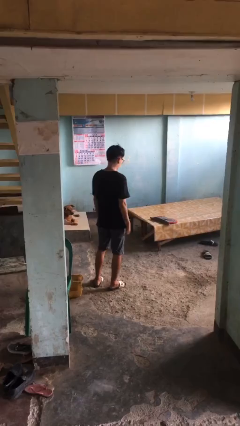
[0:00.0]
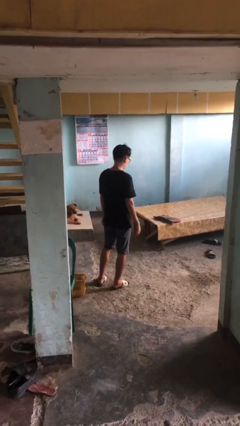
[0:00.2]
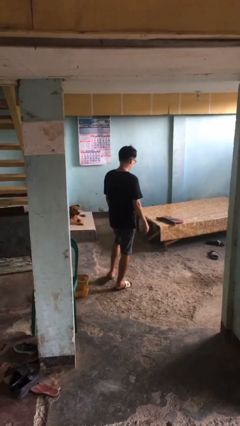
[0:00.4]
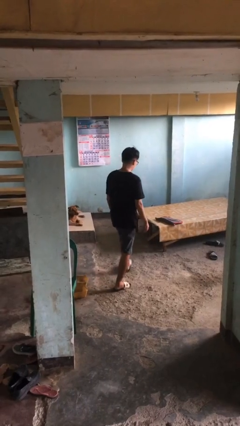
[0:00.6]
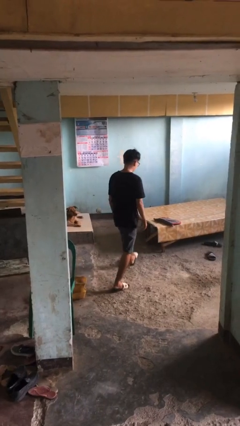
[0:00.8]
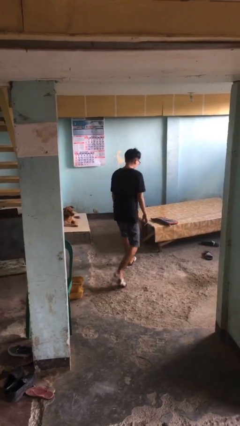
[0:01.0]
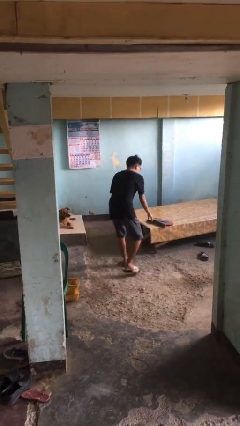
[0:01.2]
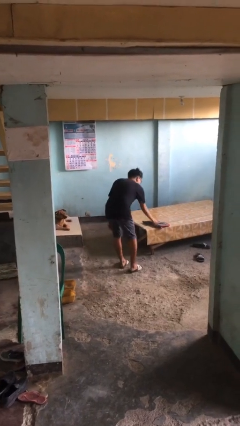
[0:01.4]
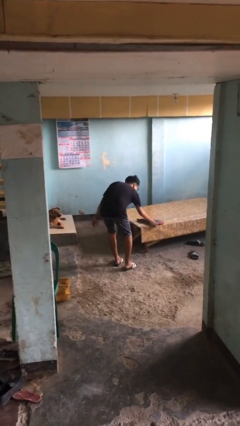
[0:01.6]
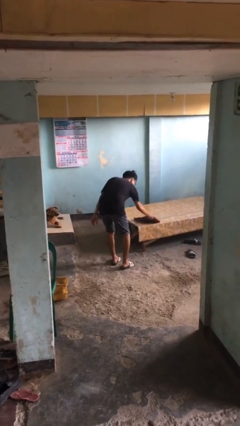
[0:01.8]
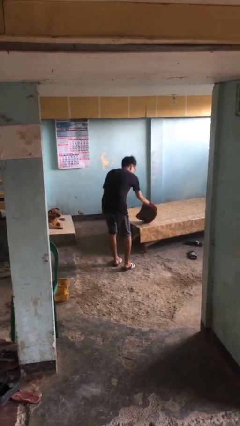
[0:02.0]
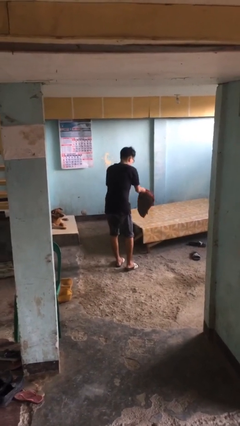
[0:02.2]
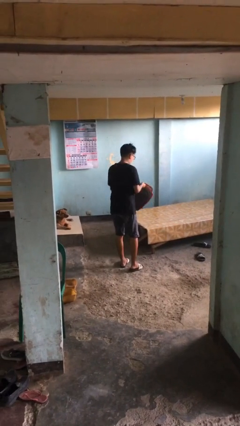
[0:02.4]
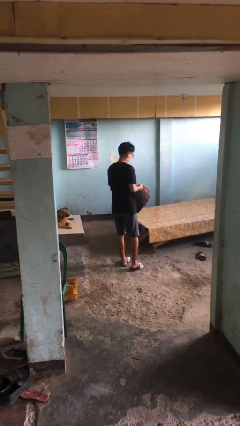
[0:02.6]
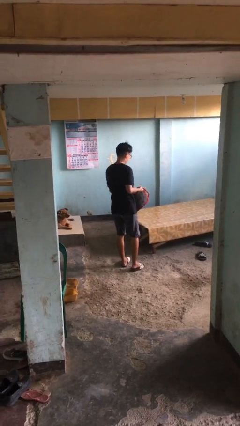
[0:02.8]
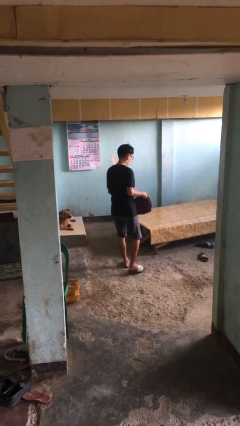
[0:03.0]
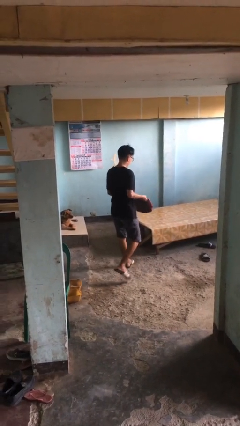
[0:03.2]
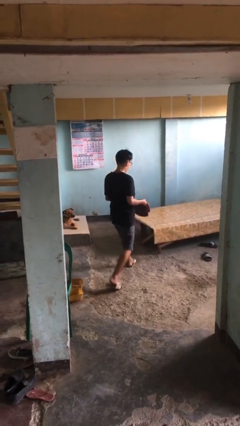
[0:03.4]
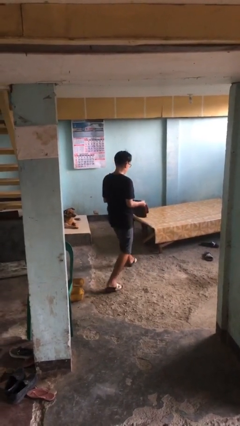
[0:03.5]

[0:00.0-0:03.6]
person picks up object from bed

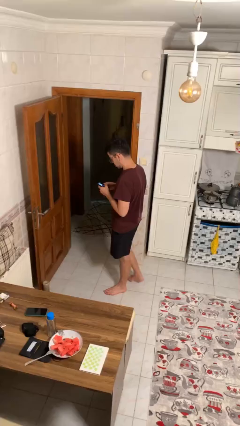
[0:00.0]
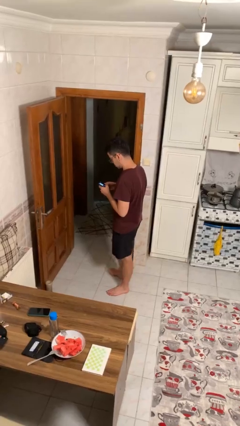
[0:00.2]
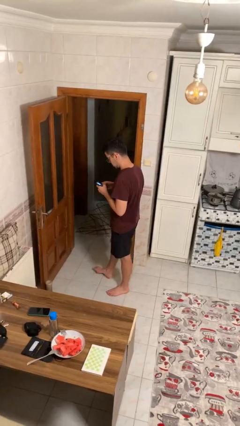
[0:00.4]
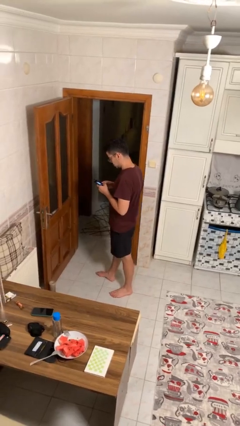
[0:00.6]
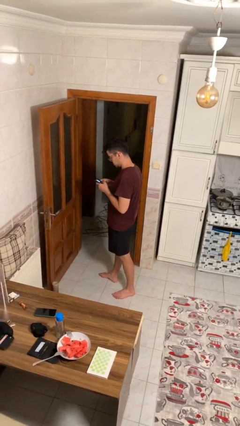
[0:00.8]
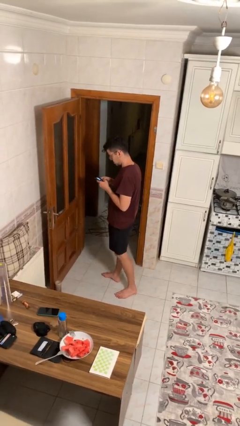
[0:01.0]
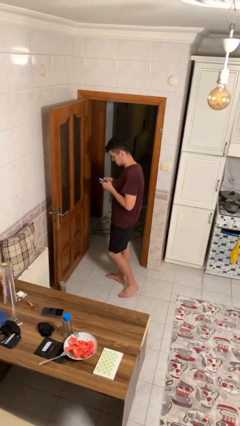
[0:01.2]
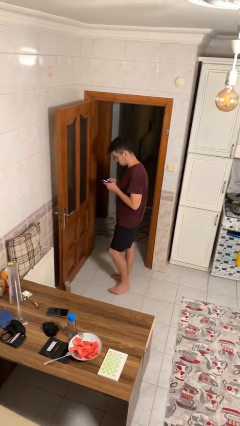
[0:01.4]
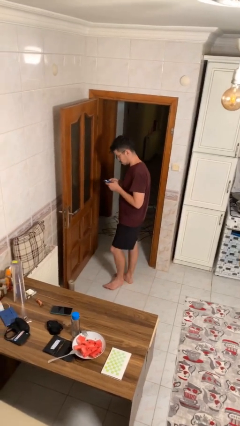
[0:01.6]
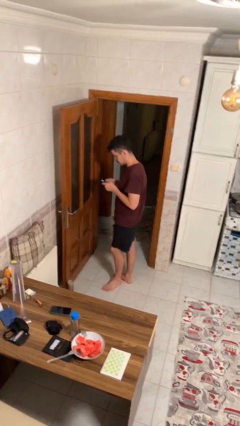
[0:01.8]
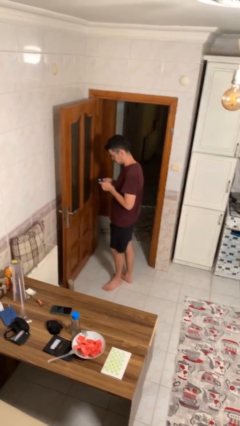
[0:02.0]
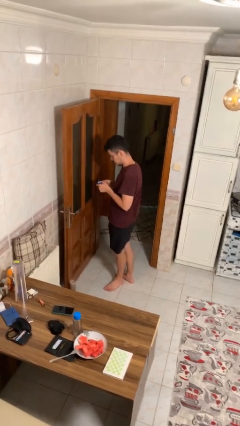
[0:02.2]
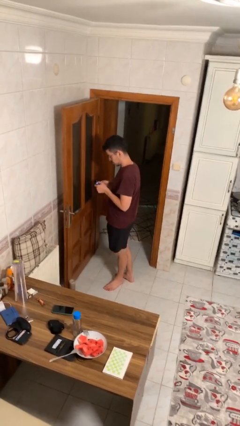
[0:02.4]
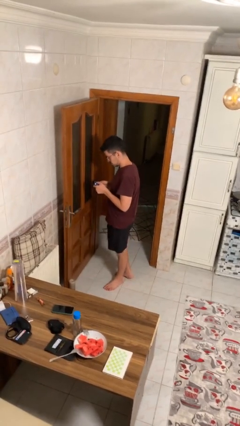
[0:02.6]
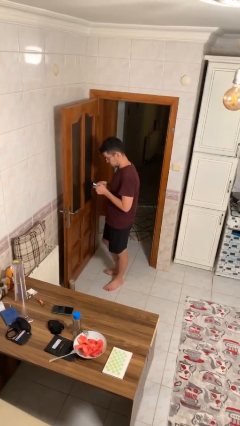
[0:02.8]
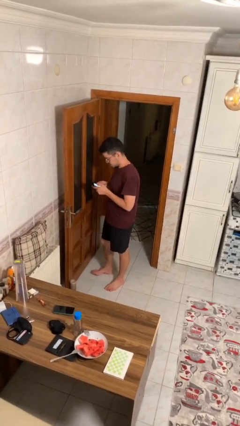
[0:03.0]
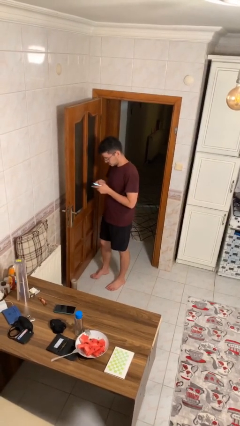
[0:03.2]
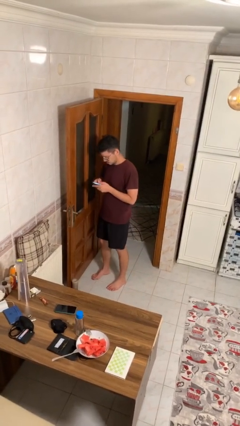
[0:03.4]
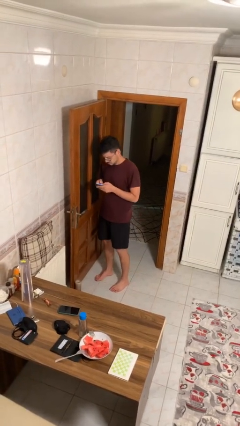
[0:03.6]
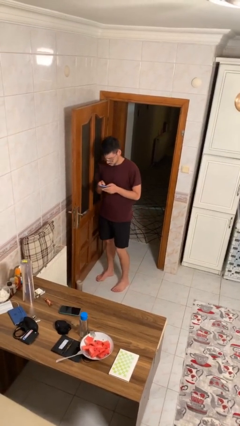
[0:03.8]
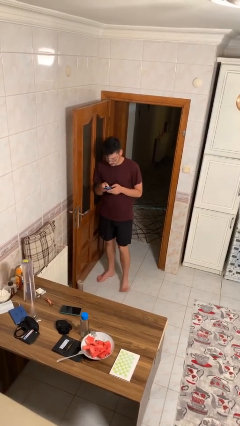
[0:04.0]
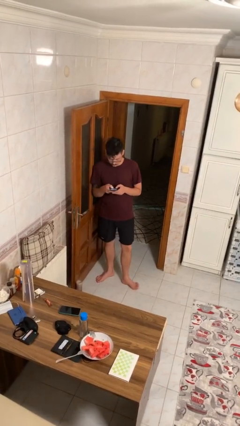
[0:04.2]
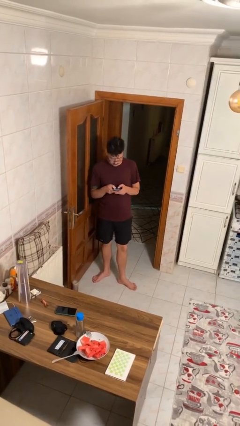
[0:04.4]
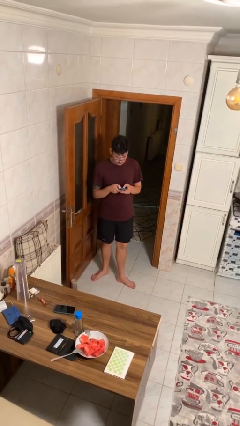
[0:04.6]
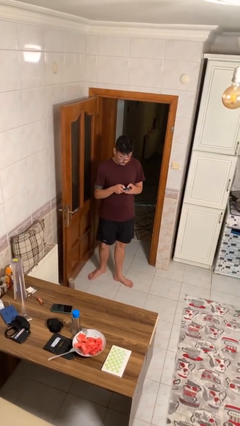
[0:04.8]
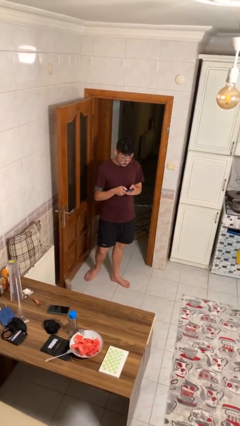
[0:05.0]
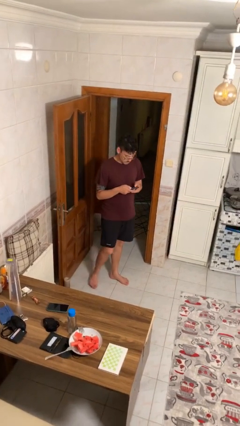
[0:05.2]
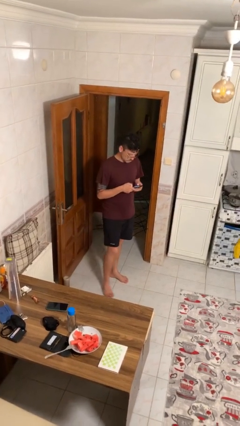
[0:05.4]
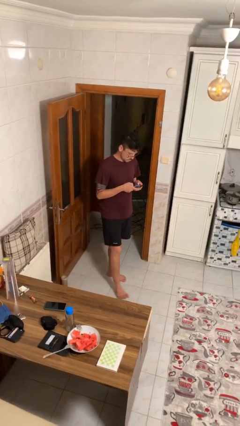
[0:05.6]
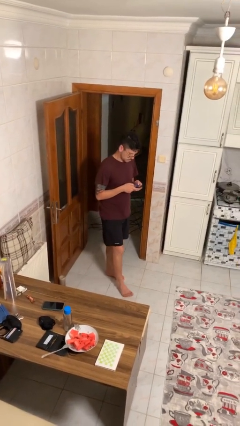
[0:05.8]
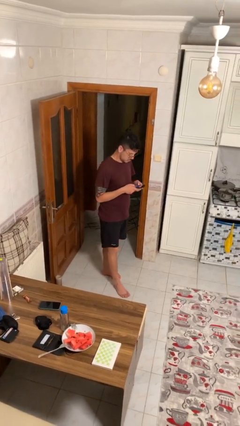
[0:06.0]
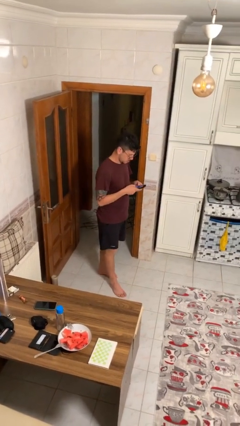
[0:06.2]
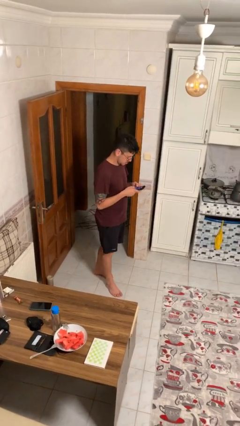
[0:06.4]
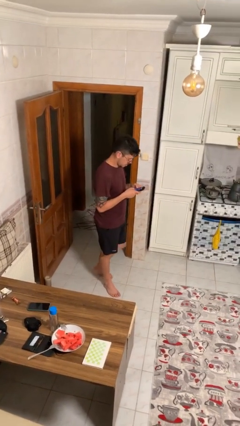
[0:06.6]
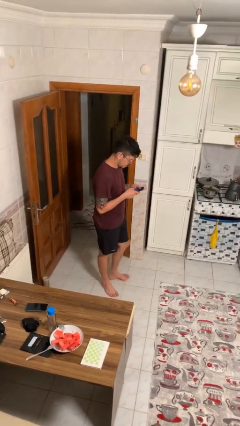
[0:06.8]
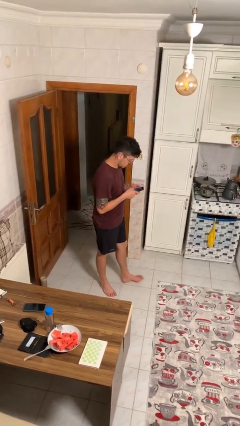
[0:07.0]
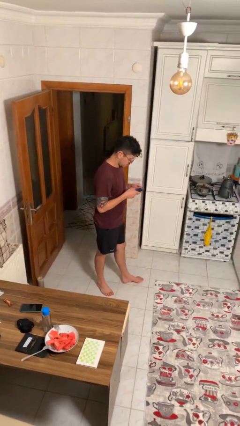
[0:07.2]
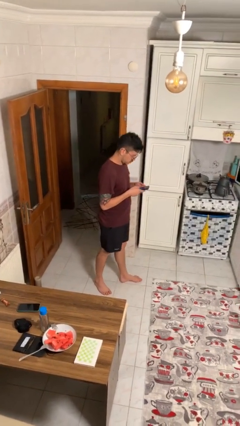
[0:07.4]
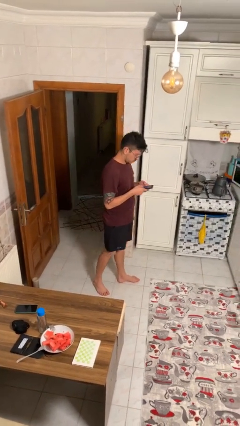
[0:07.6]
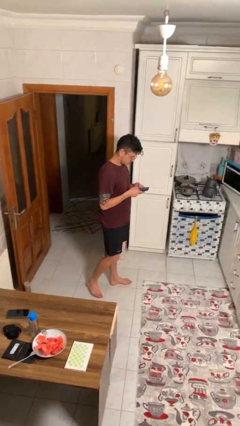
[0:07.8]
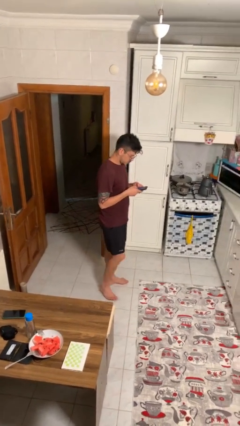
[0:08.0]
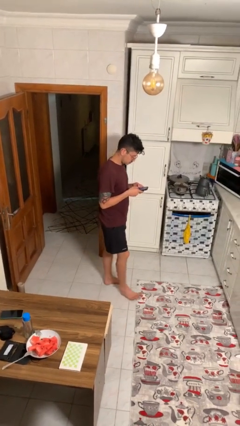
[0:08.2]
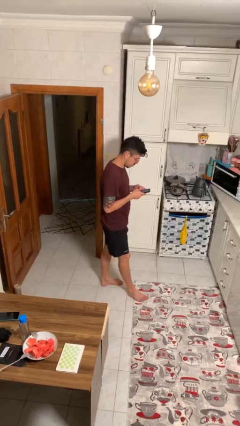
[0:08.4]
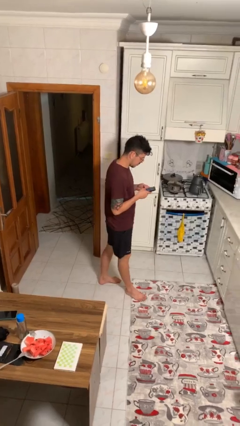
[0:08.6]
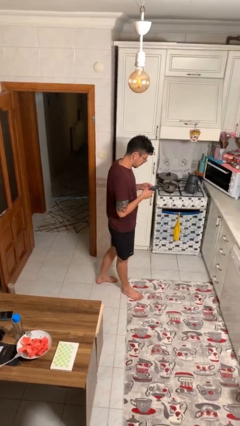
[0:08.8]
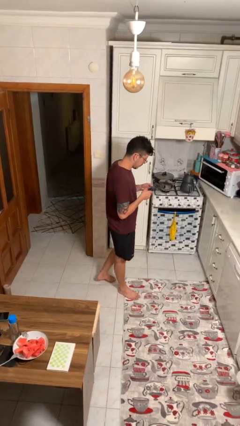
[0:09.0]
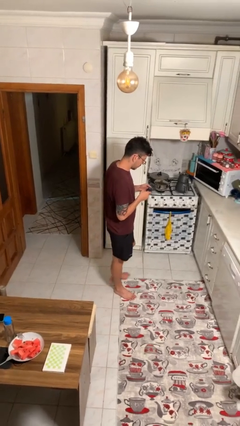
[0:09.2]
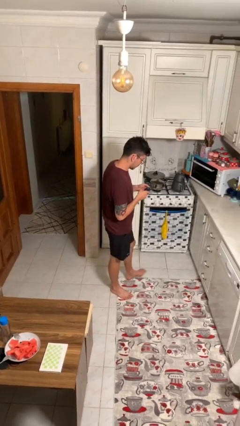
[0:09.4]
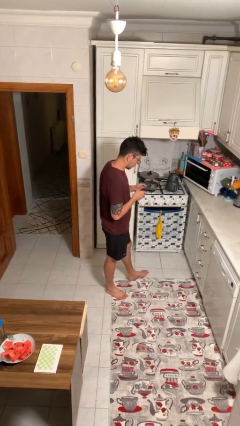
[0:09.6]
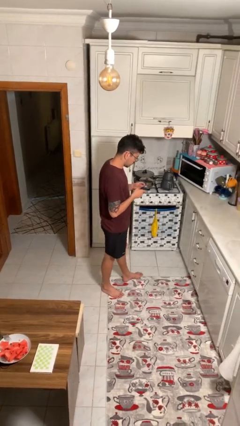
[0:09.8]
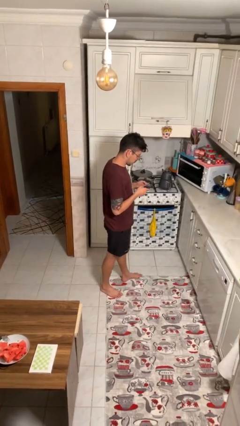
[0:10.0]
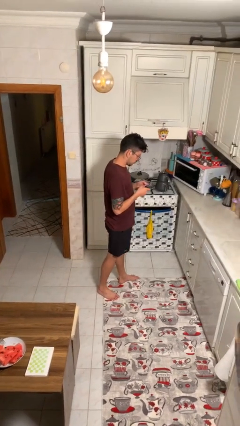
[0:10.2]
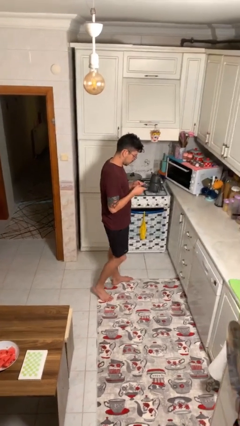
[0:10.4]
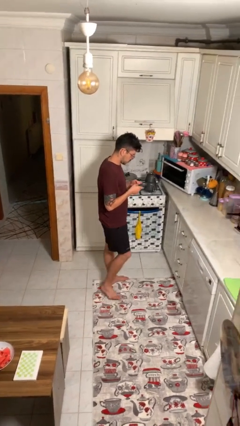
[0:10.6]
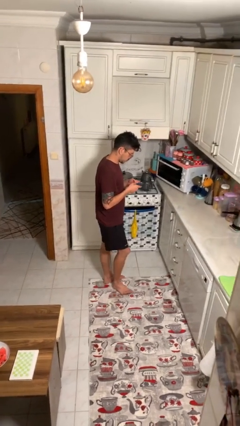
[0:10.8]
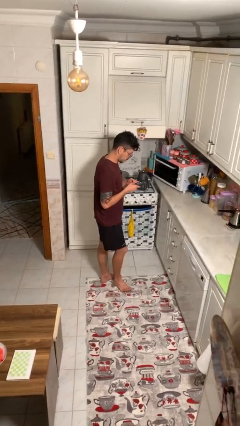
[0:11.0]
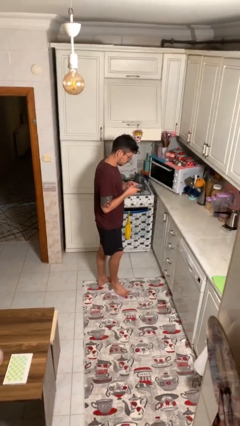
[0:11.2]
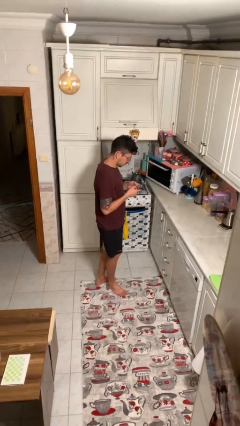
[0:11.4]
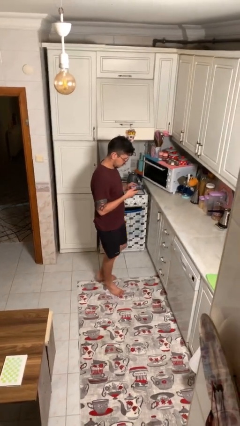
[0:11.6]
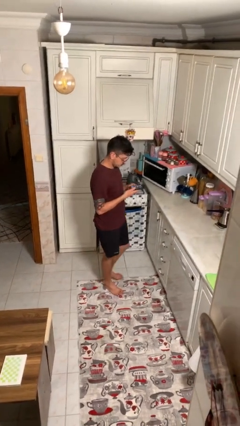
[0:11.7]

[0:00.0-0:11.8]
person texts on phone

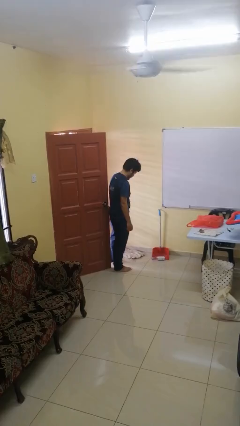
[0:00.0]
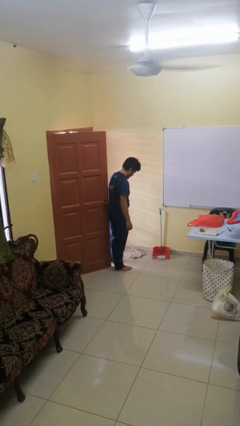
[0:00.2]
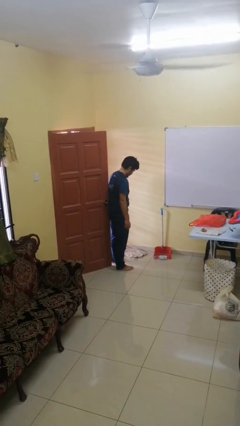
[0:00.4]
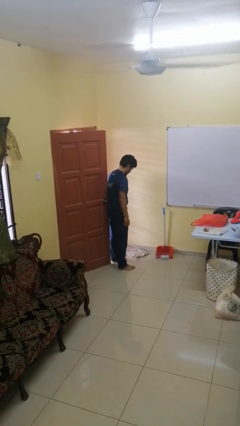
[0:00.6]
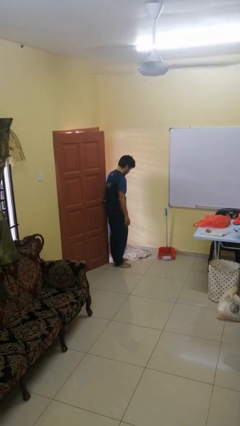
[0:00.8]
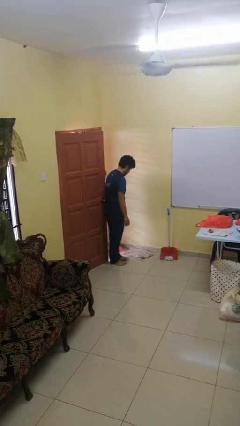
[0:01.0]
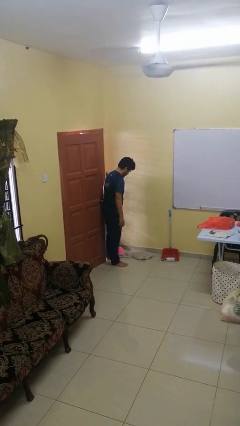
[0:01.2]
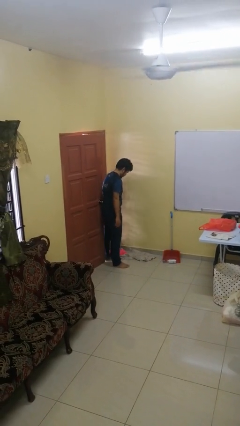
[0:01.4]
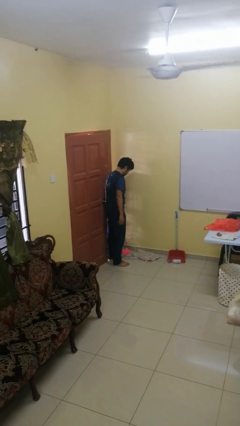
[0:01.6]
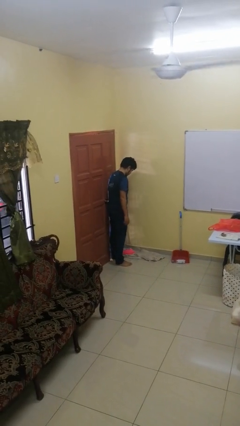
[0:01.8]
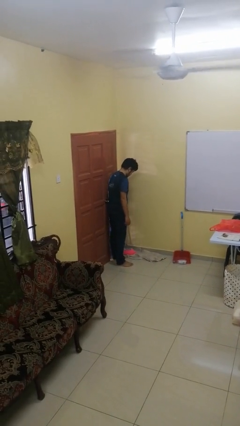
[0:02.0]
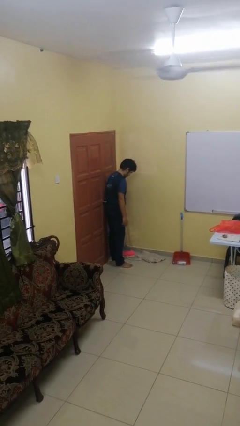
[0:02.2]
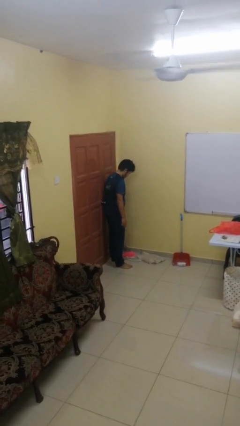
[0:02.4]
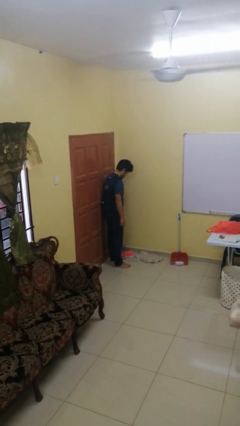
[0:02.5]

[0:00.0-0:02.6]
person closes door with hip
